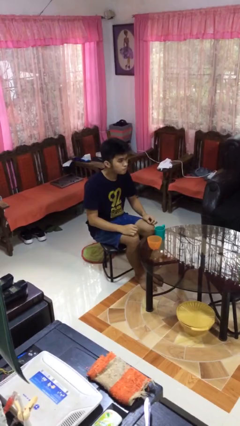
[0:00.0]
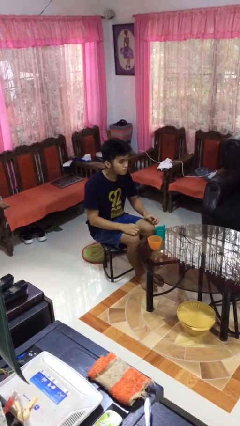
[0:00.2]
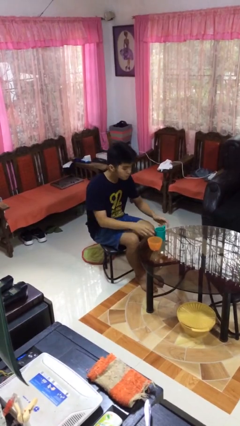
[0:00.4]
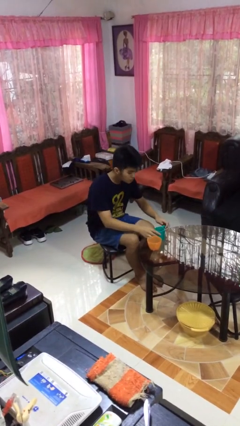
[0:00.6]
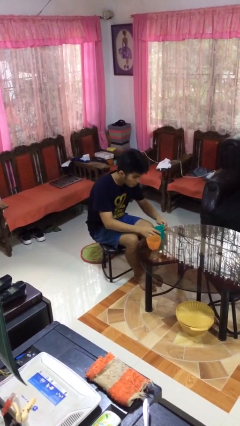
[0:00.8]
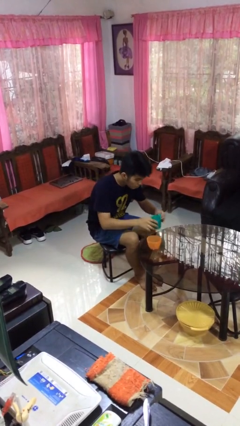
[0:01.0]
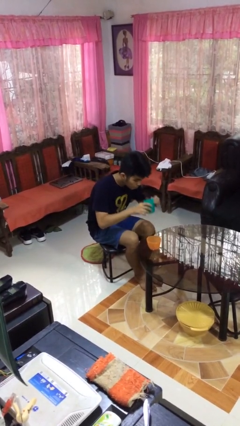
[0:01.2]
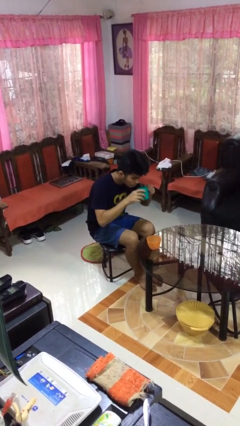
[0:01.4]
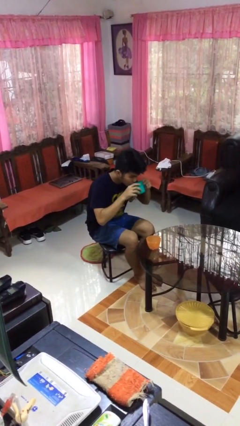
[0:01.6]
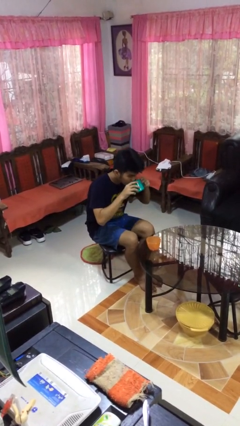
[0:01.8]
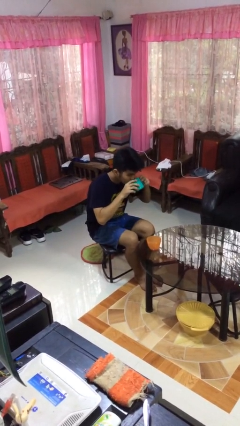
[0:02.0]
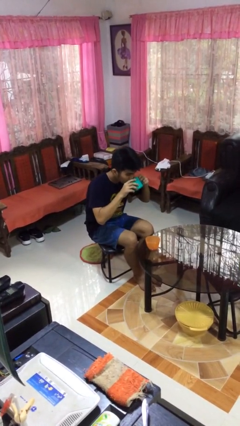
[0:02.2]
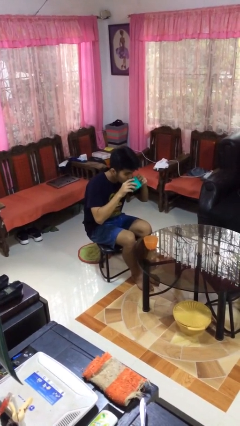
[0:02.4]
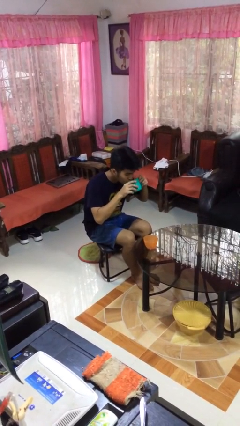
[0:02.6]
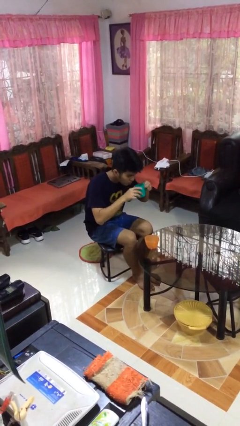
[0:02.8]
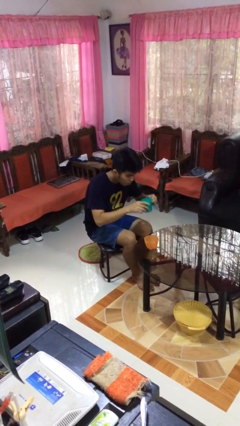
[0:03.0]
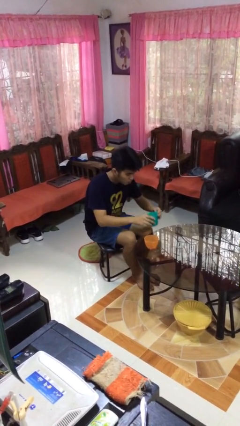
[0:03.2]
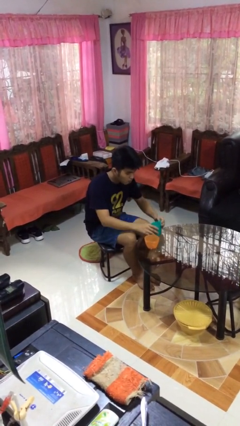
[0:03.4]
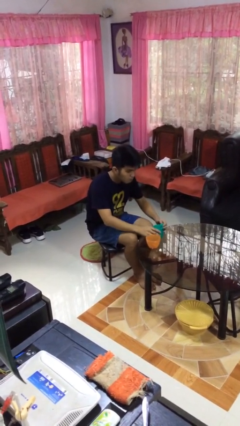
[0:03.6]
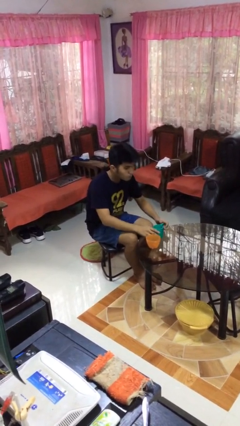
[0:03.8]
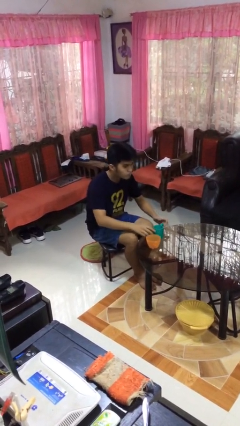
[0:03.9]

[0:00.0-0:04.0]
person drinks from cup

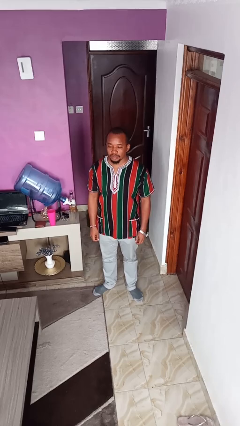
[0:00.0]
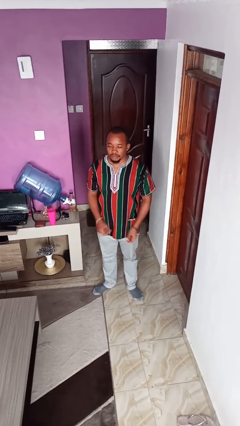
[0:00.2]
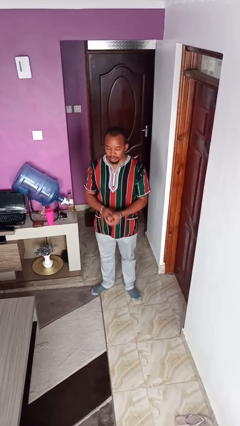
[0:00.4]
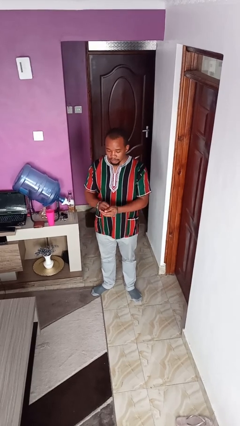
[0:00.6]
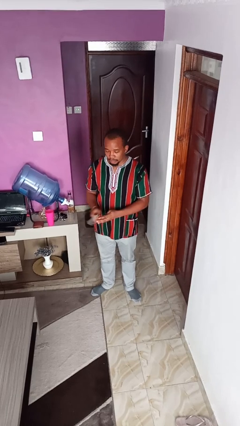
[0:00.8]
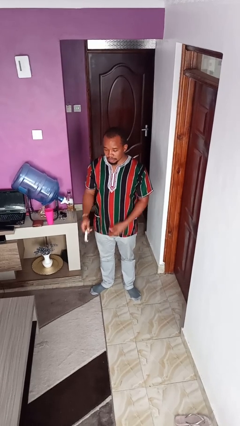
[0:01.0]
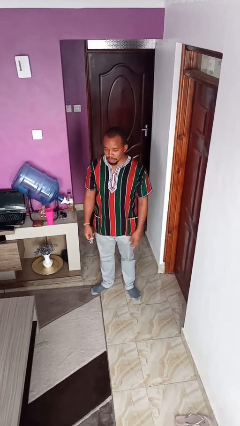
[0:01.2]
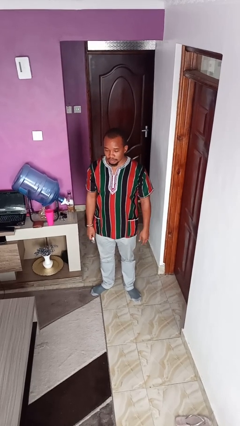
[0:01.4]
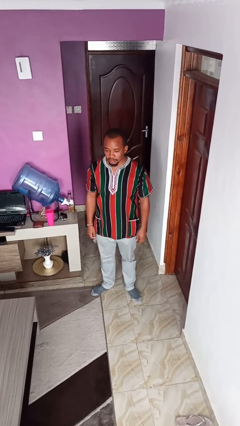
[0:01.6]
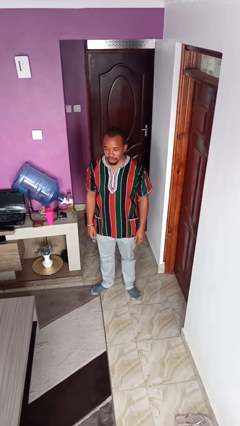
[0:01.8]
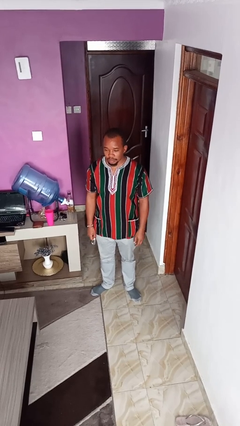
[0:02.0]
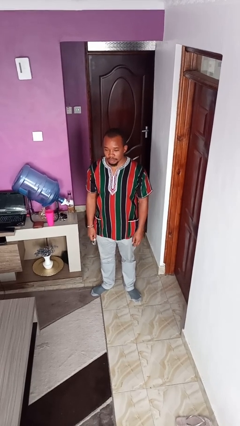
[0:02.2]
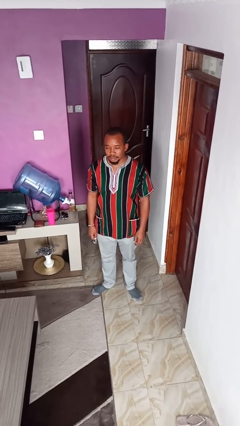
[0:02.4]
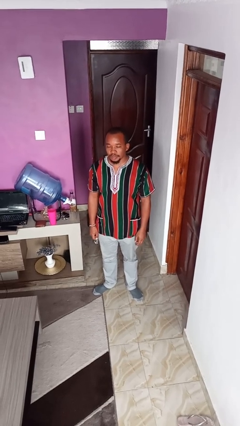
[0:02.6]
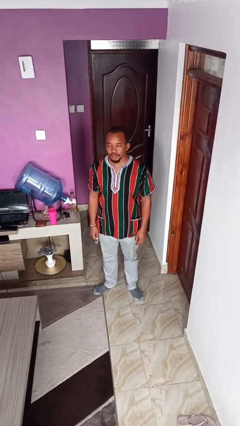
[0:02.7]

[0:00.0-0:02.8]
person takes off wristwatch

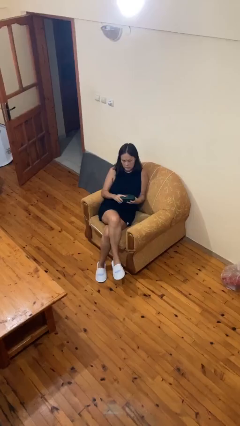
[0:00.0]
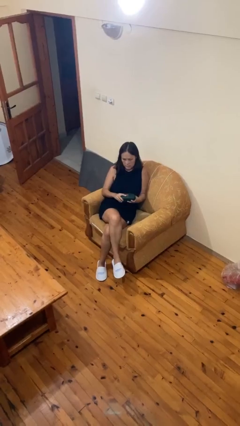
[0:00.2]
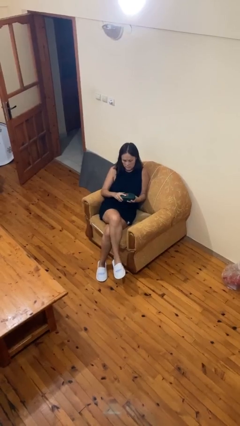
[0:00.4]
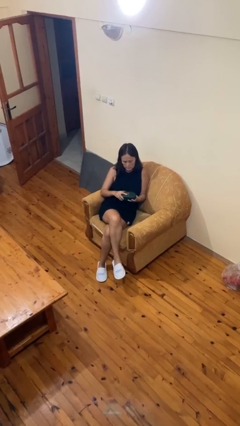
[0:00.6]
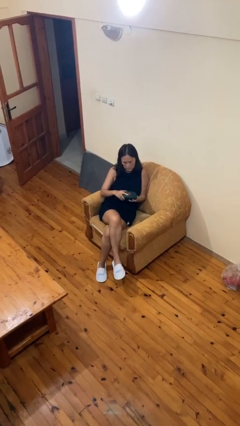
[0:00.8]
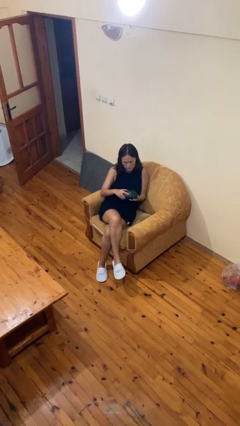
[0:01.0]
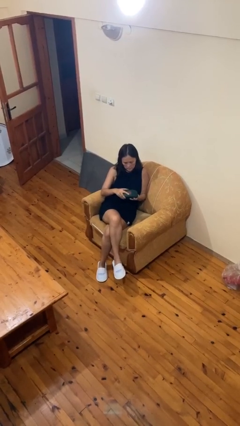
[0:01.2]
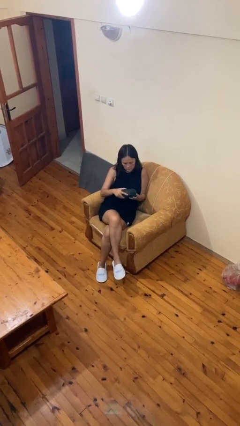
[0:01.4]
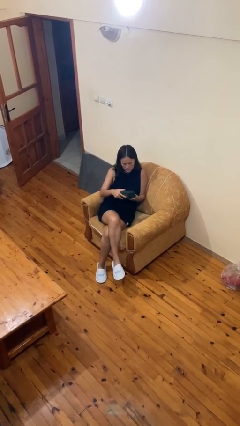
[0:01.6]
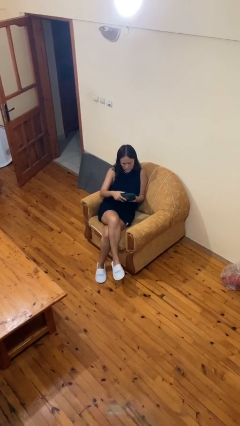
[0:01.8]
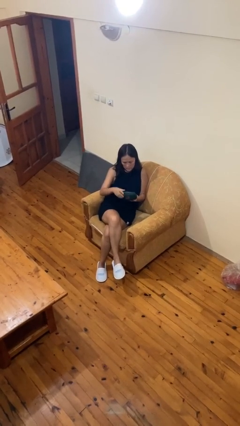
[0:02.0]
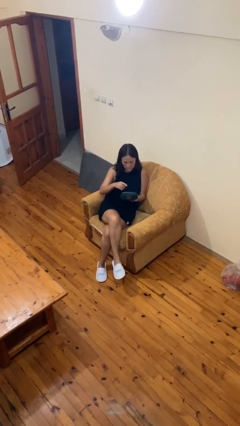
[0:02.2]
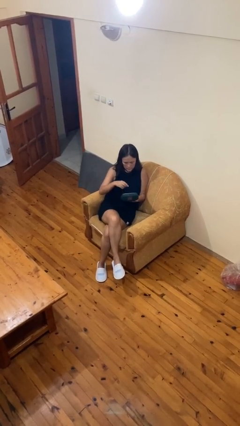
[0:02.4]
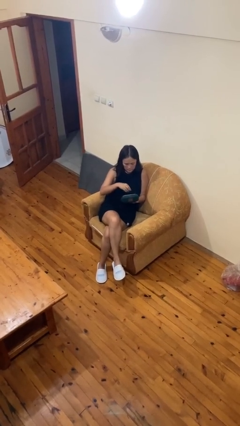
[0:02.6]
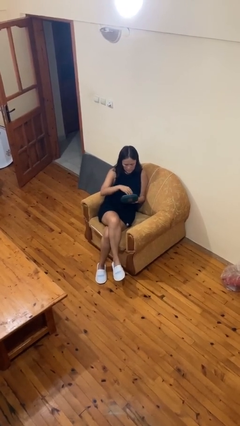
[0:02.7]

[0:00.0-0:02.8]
person opens jewelry box

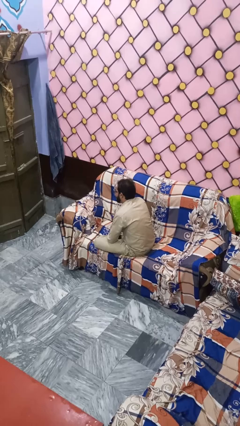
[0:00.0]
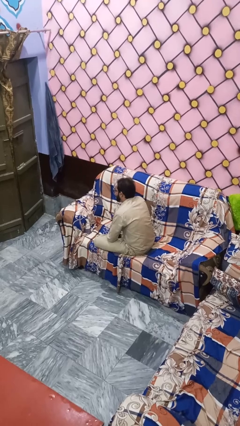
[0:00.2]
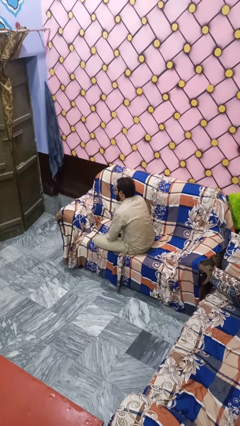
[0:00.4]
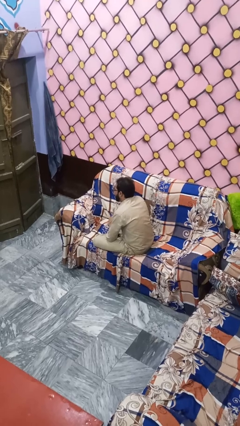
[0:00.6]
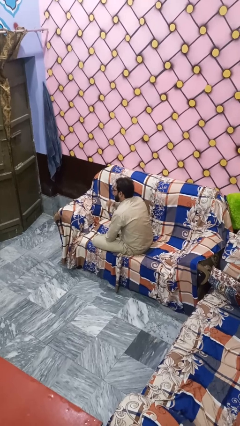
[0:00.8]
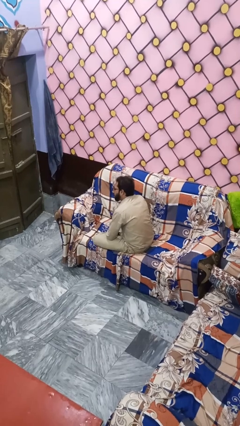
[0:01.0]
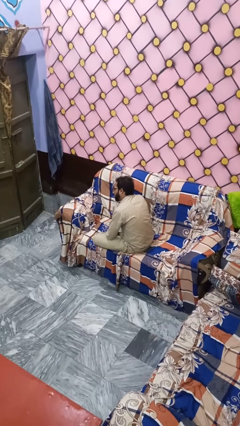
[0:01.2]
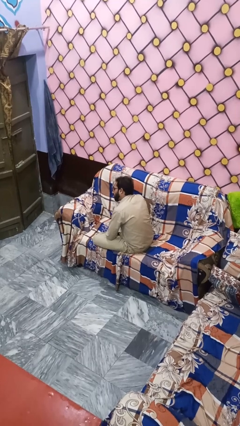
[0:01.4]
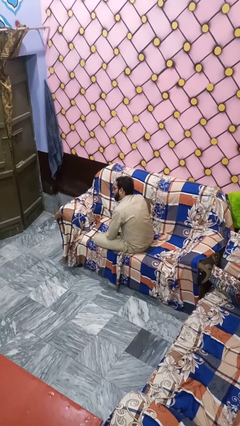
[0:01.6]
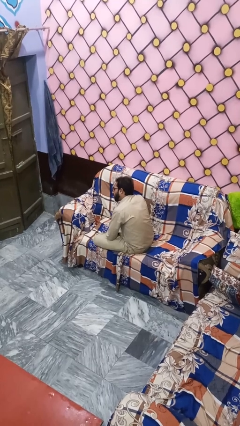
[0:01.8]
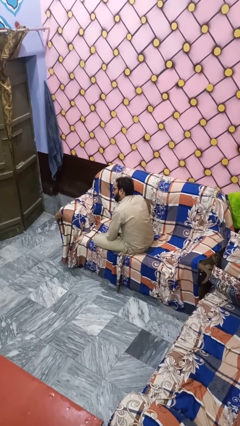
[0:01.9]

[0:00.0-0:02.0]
person sticks out tongue

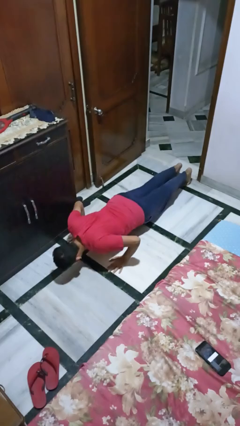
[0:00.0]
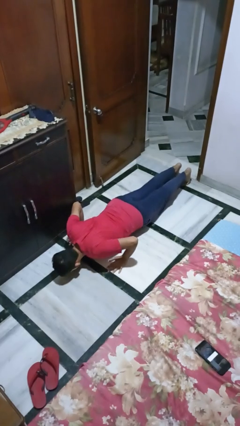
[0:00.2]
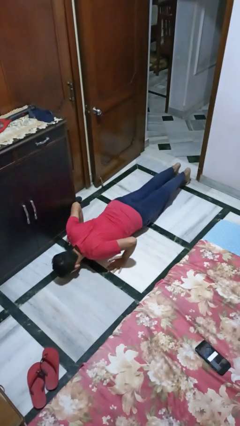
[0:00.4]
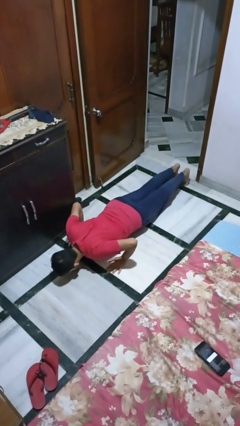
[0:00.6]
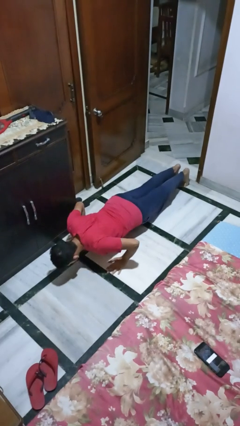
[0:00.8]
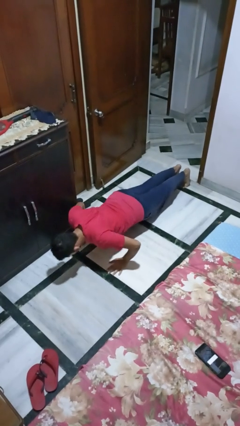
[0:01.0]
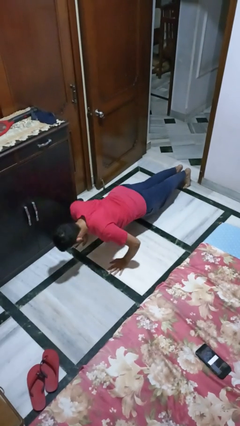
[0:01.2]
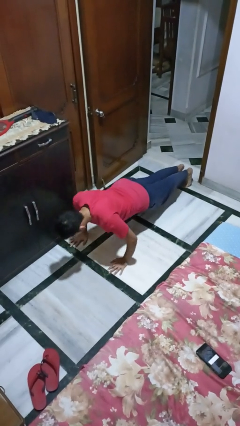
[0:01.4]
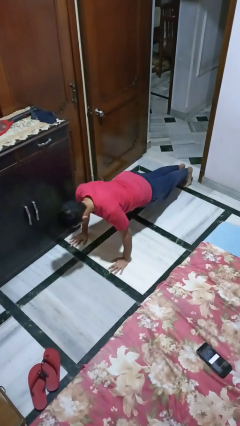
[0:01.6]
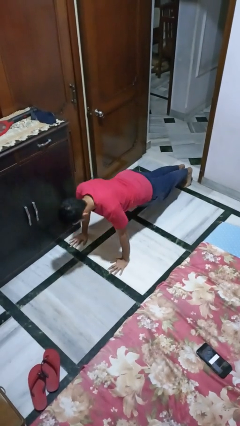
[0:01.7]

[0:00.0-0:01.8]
person exercises with pushup

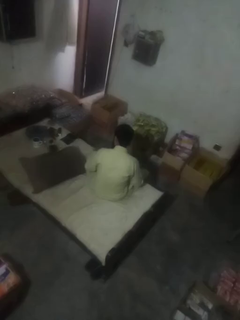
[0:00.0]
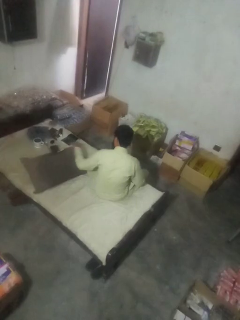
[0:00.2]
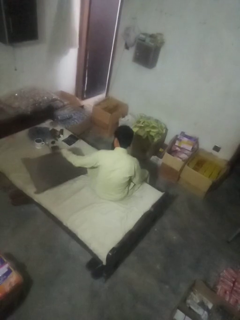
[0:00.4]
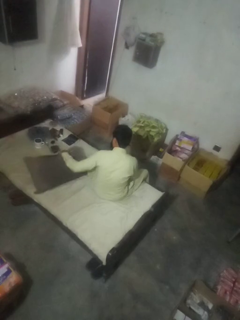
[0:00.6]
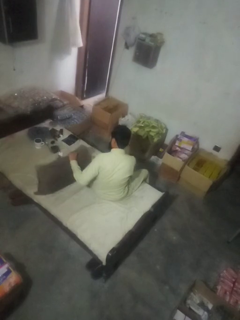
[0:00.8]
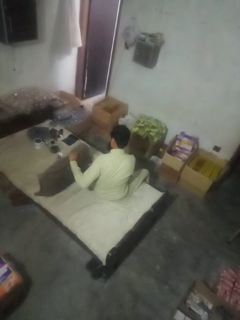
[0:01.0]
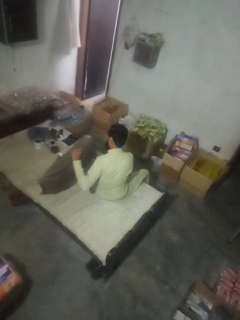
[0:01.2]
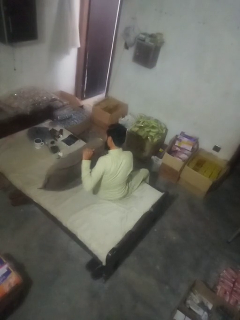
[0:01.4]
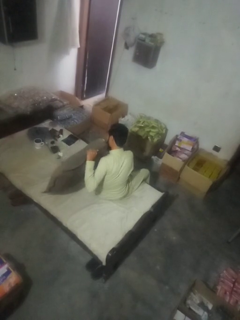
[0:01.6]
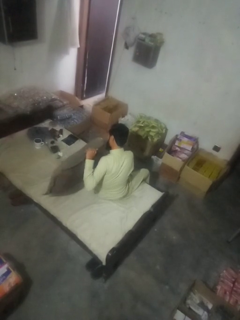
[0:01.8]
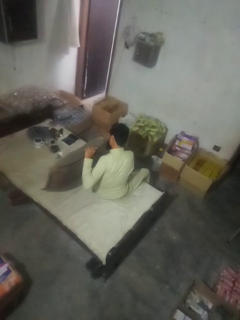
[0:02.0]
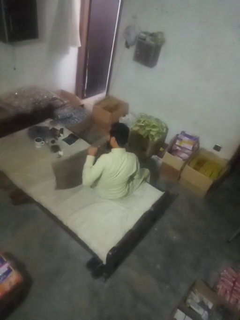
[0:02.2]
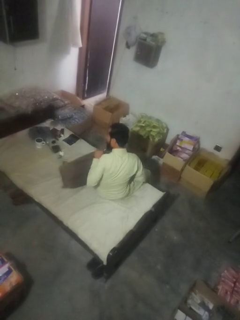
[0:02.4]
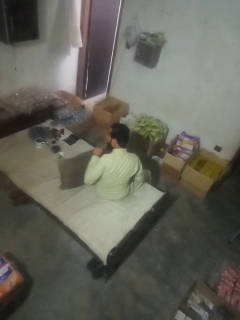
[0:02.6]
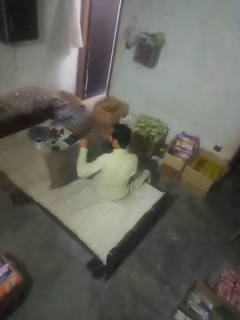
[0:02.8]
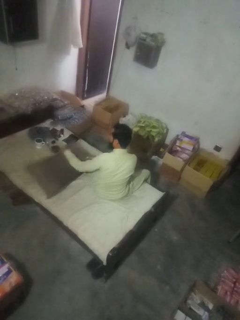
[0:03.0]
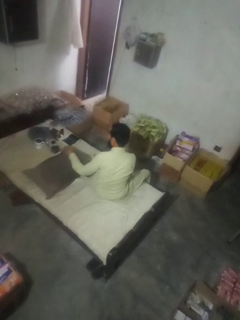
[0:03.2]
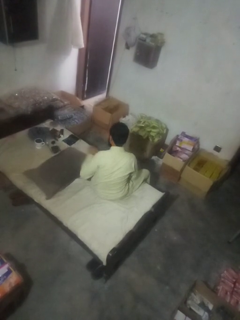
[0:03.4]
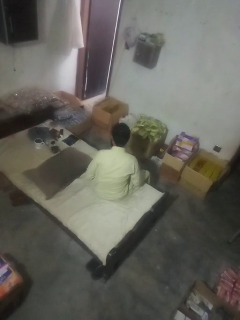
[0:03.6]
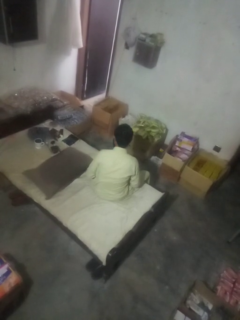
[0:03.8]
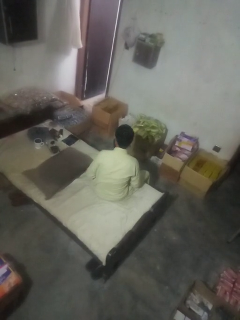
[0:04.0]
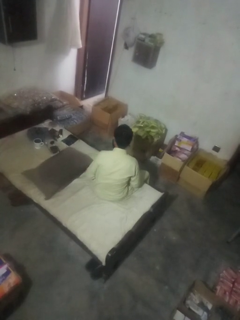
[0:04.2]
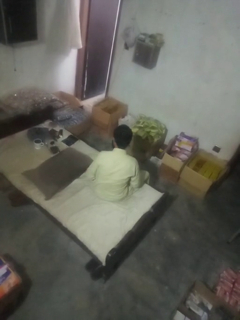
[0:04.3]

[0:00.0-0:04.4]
person searches in couch

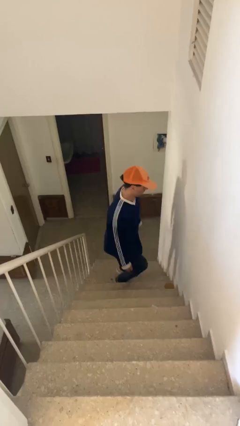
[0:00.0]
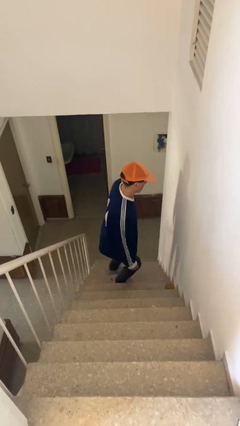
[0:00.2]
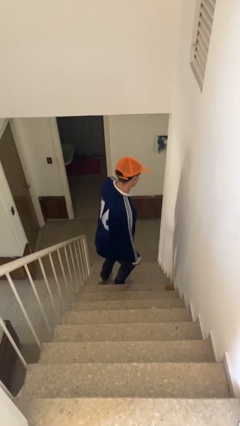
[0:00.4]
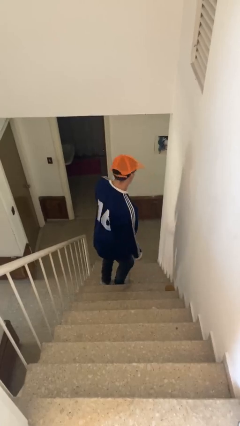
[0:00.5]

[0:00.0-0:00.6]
person climbs down stairs
